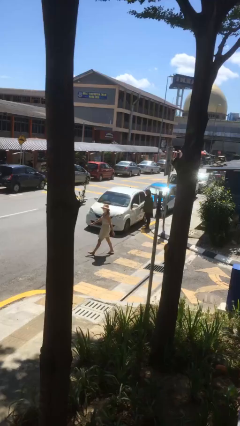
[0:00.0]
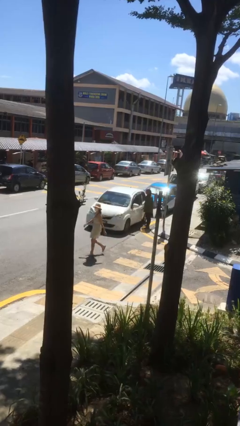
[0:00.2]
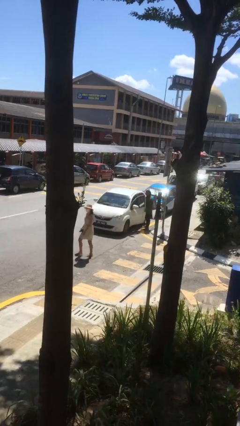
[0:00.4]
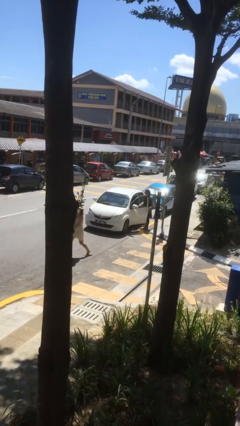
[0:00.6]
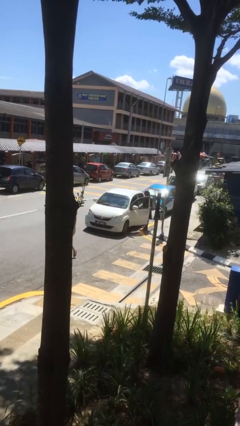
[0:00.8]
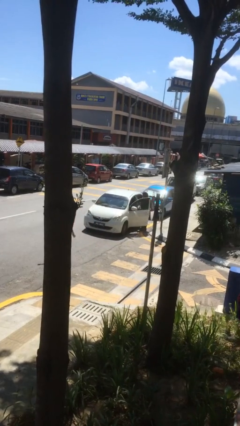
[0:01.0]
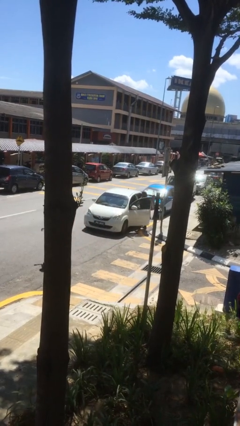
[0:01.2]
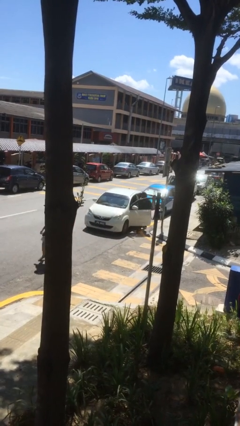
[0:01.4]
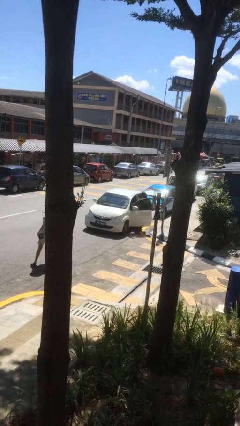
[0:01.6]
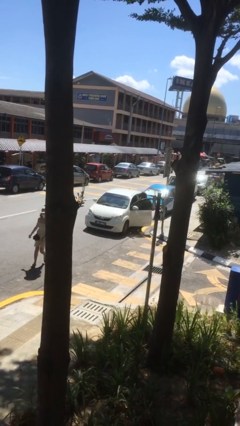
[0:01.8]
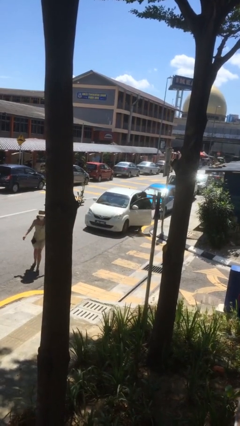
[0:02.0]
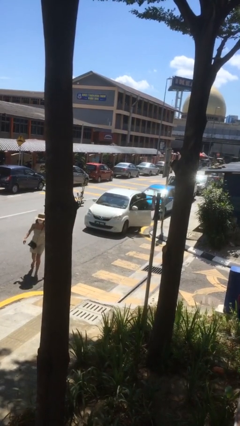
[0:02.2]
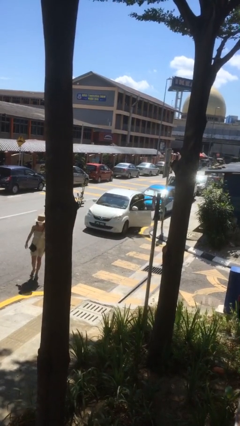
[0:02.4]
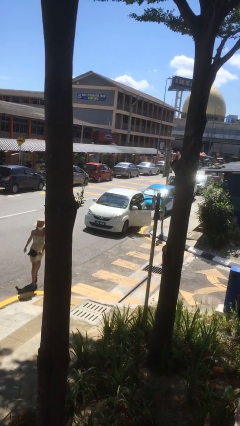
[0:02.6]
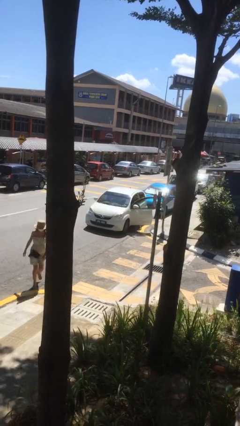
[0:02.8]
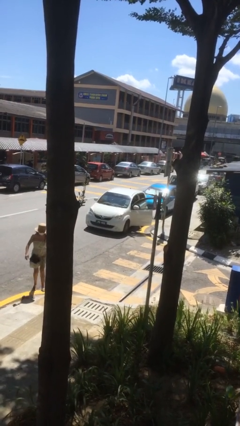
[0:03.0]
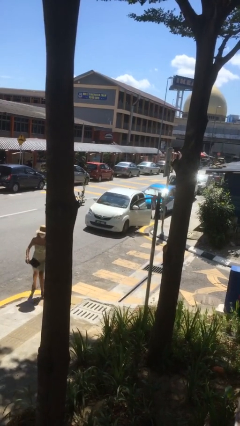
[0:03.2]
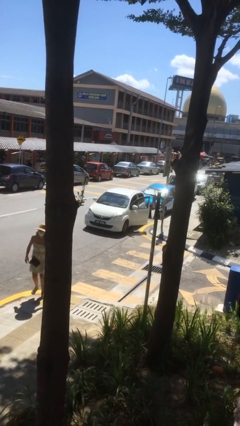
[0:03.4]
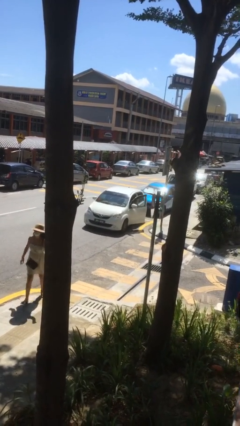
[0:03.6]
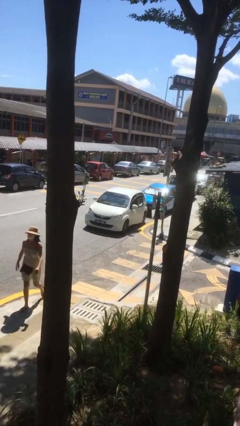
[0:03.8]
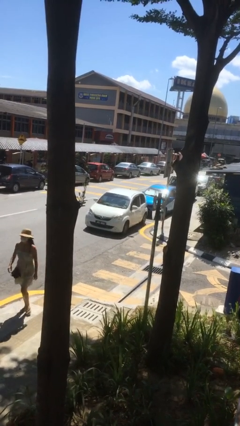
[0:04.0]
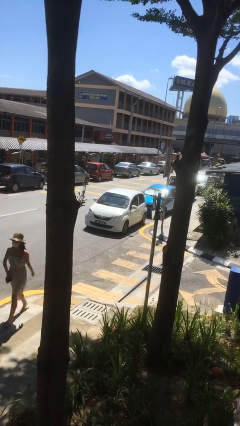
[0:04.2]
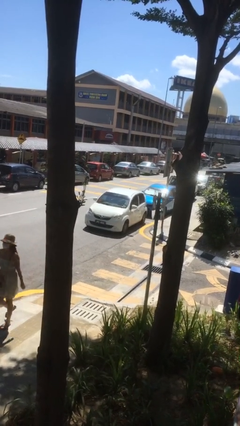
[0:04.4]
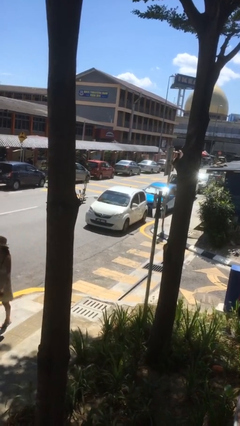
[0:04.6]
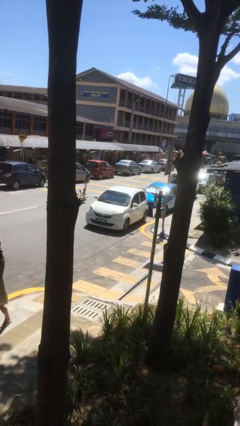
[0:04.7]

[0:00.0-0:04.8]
car picks up person

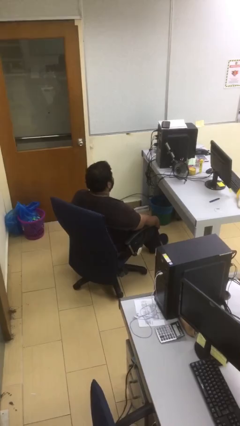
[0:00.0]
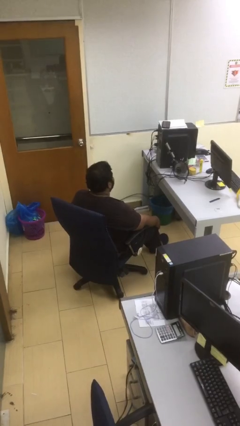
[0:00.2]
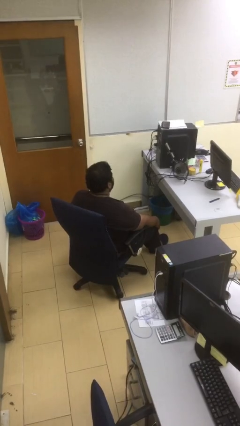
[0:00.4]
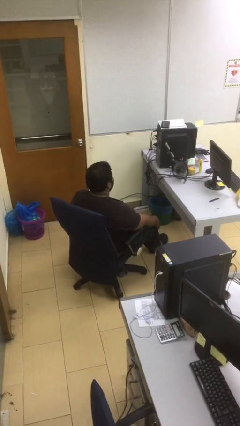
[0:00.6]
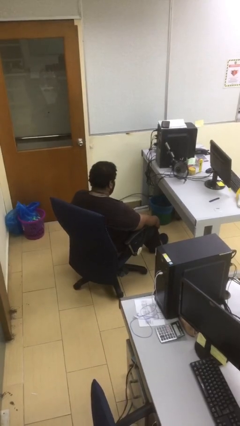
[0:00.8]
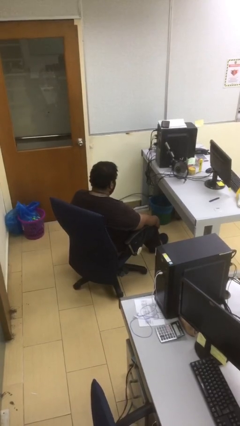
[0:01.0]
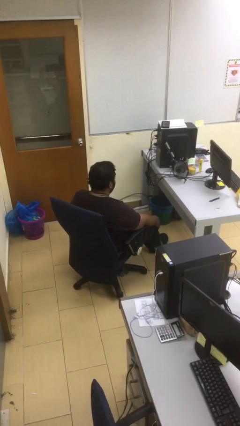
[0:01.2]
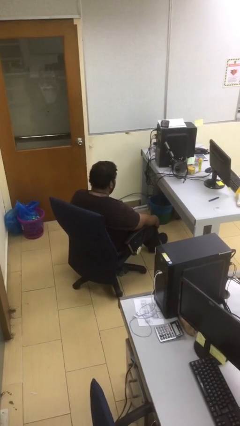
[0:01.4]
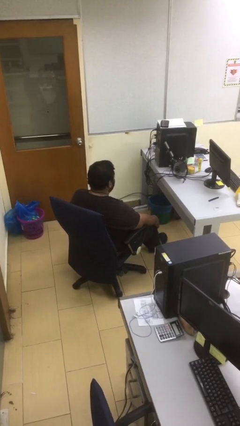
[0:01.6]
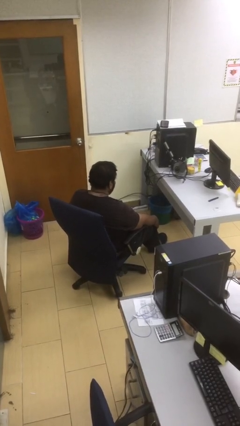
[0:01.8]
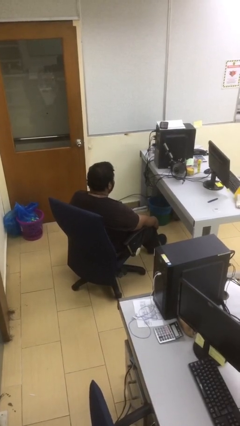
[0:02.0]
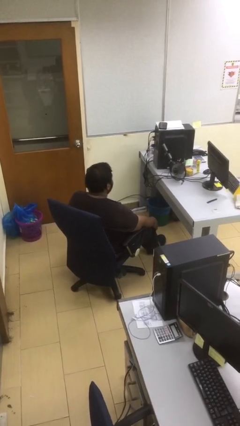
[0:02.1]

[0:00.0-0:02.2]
person nods head

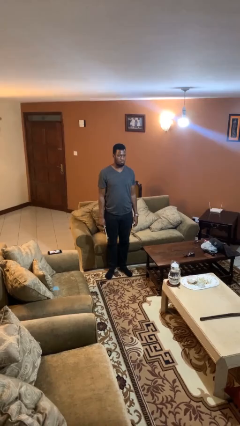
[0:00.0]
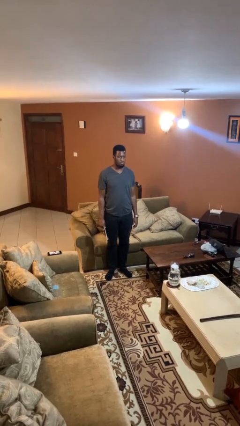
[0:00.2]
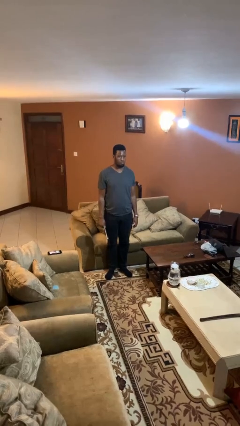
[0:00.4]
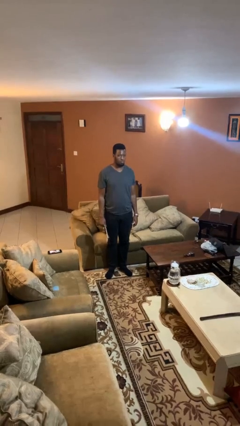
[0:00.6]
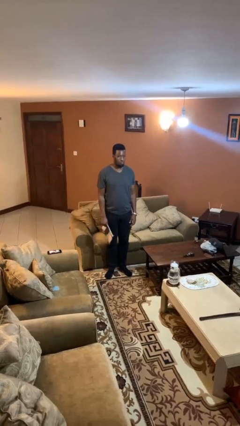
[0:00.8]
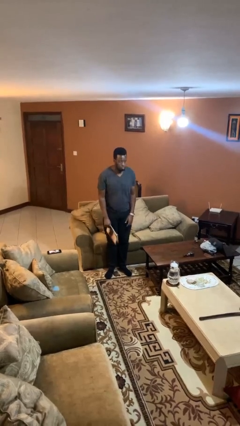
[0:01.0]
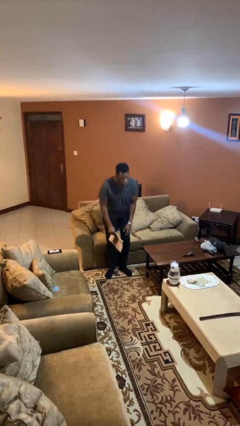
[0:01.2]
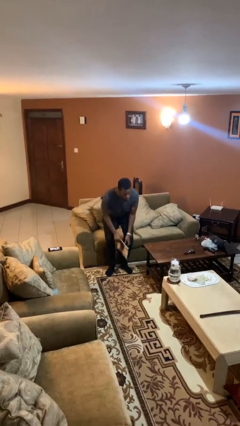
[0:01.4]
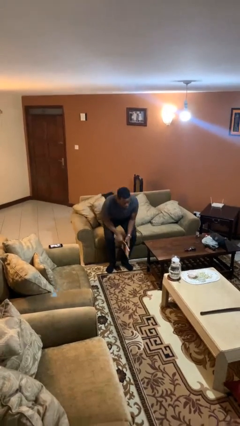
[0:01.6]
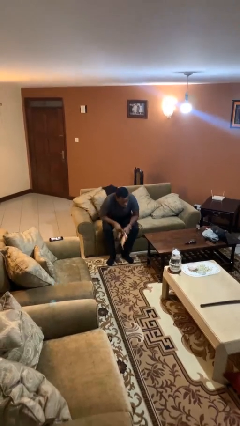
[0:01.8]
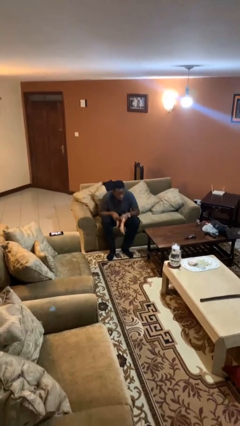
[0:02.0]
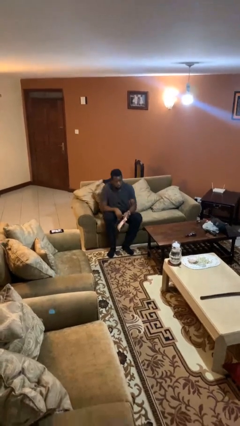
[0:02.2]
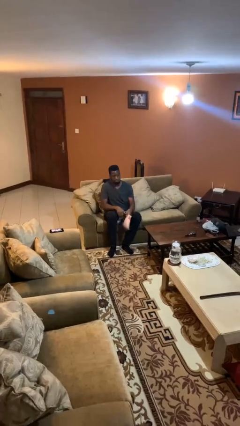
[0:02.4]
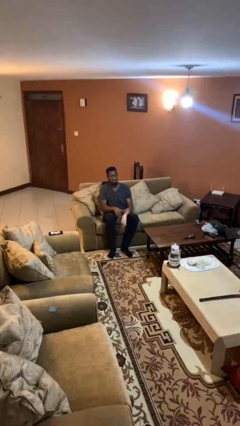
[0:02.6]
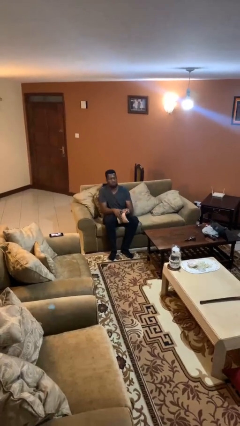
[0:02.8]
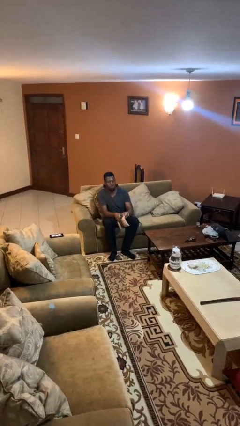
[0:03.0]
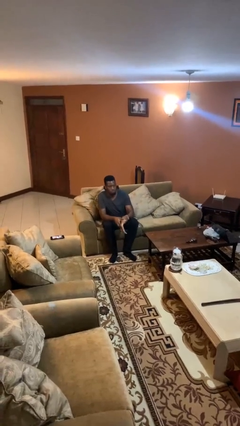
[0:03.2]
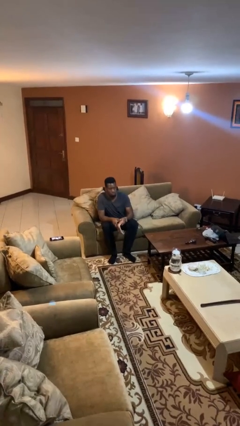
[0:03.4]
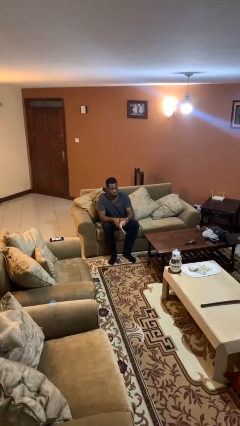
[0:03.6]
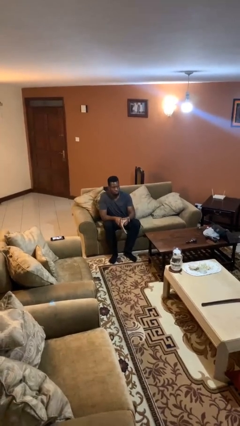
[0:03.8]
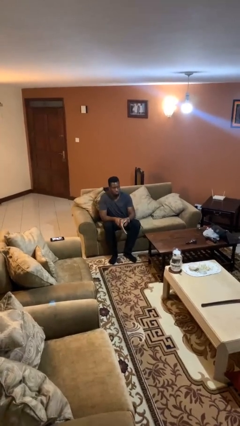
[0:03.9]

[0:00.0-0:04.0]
person sits down

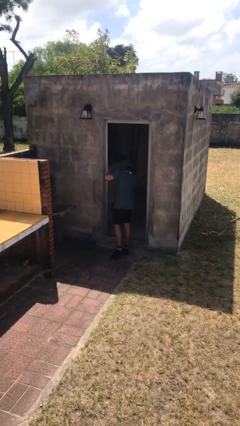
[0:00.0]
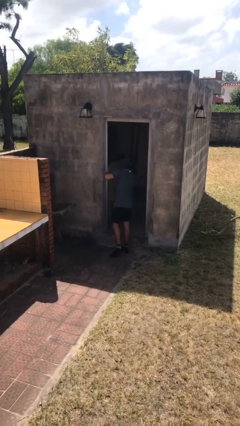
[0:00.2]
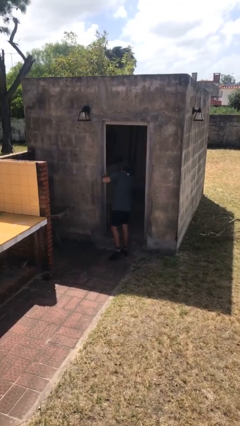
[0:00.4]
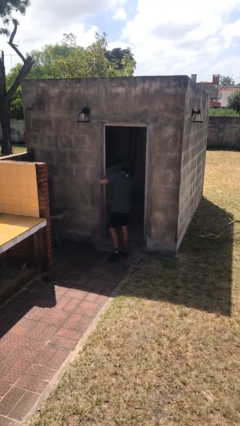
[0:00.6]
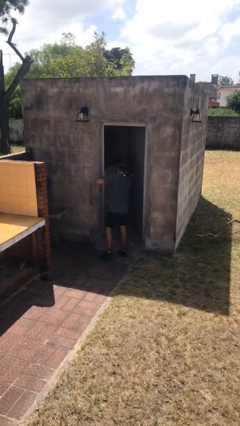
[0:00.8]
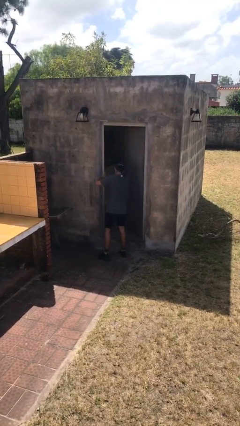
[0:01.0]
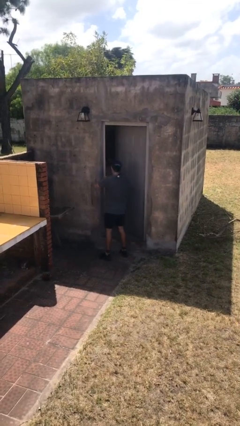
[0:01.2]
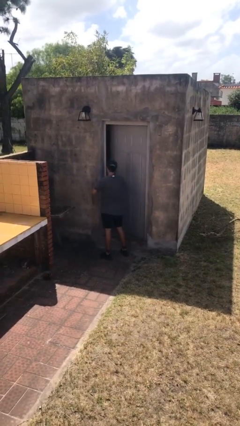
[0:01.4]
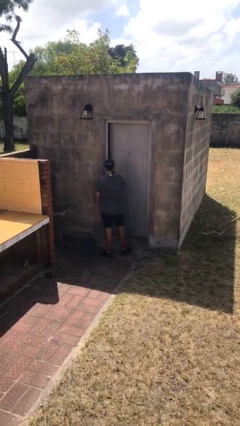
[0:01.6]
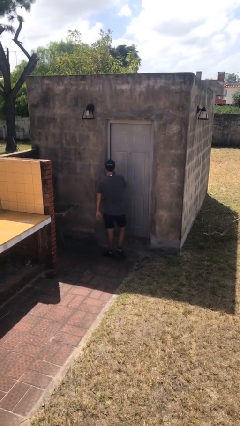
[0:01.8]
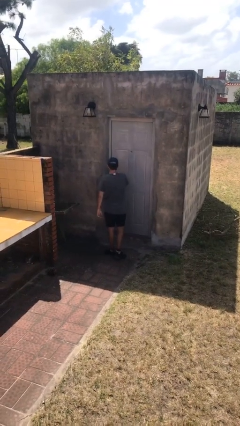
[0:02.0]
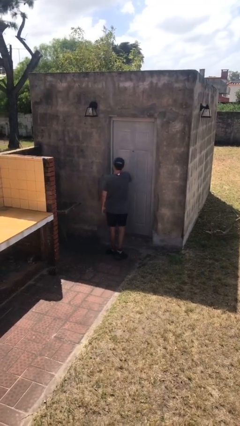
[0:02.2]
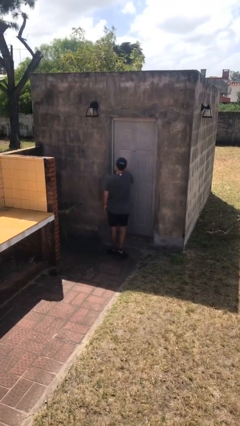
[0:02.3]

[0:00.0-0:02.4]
person closes facility door

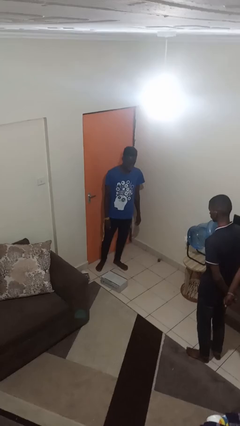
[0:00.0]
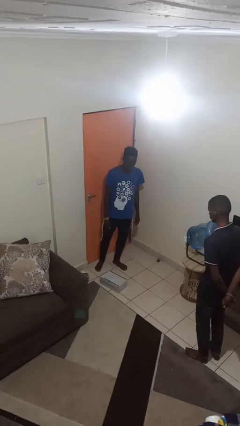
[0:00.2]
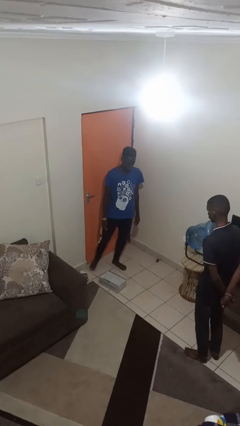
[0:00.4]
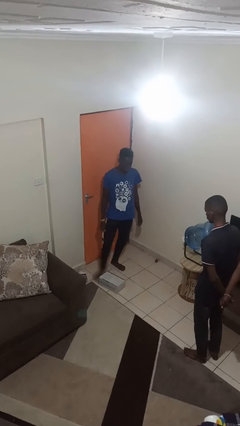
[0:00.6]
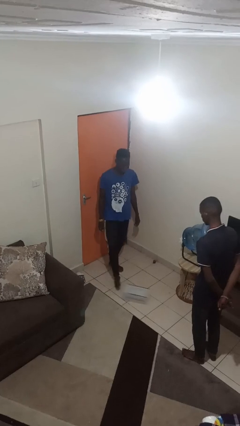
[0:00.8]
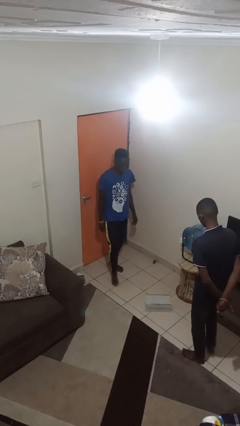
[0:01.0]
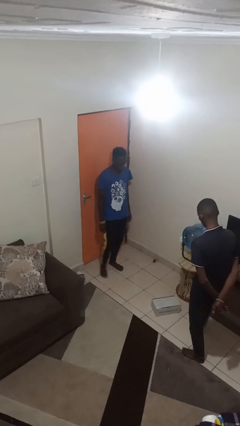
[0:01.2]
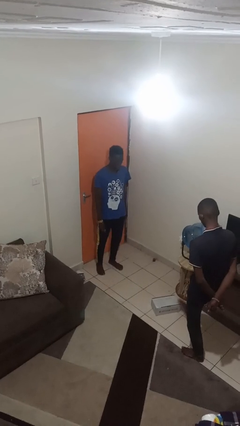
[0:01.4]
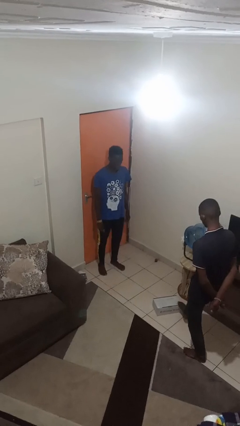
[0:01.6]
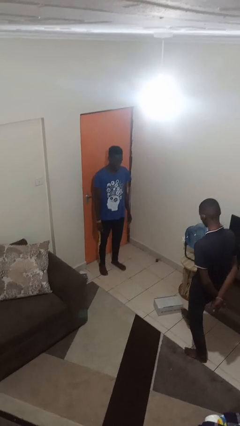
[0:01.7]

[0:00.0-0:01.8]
person kicks object to person

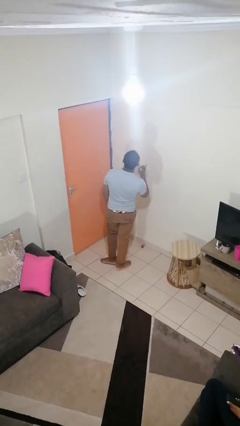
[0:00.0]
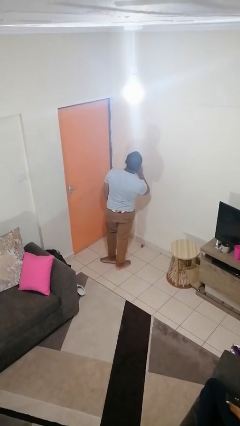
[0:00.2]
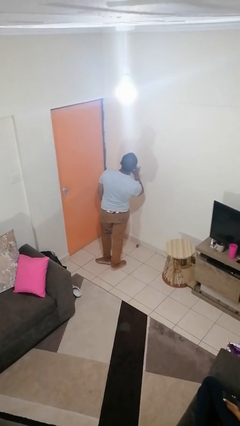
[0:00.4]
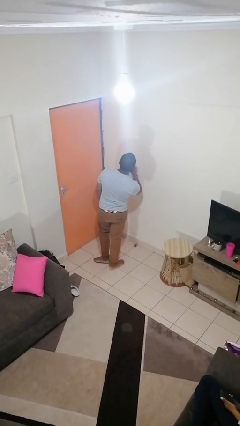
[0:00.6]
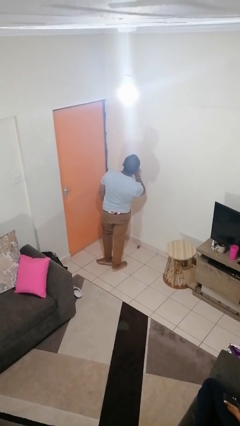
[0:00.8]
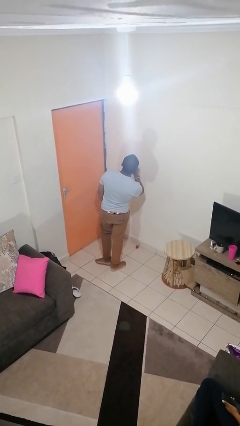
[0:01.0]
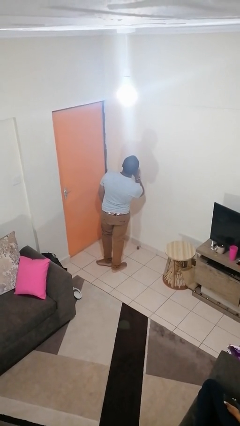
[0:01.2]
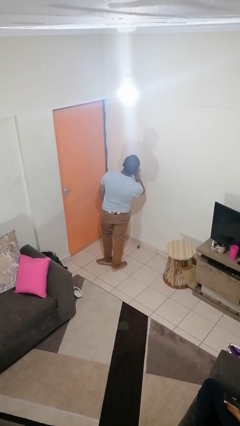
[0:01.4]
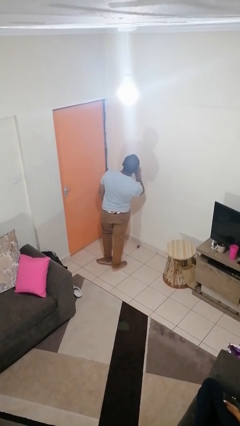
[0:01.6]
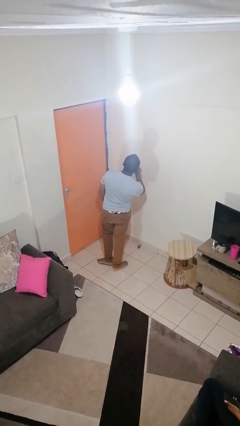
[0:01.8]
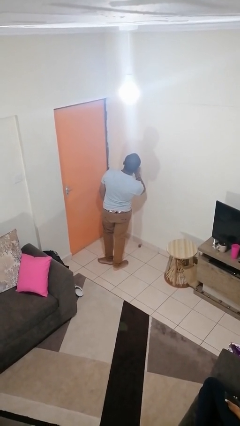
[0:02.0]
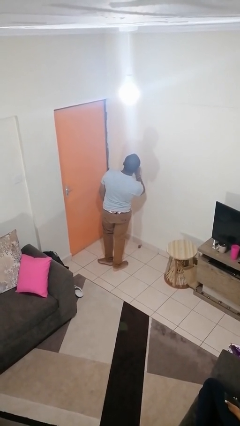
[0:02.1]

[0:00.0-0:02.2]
person gestures listen closely
